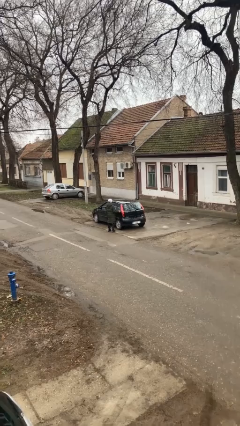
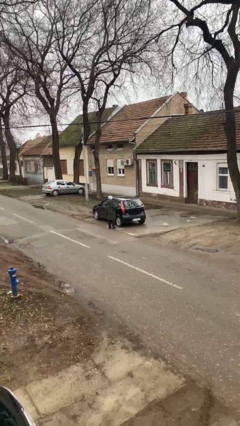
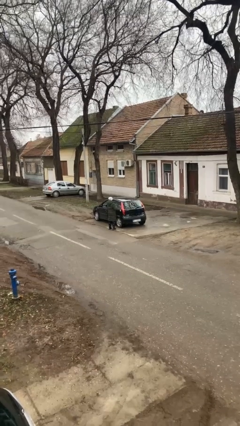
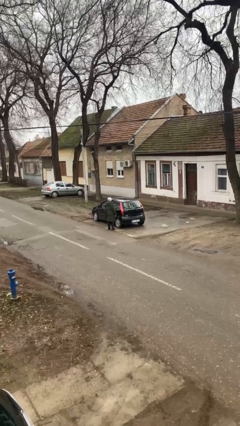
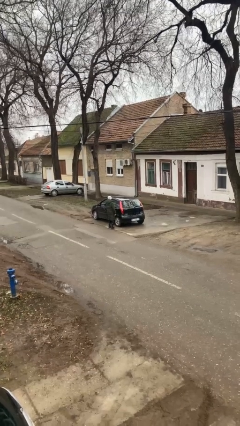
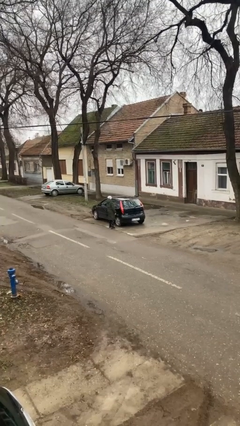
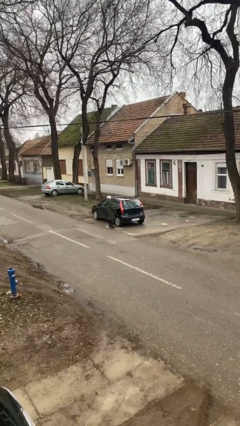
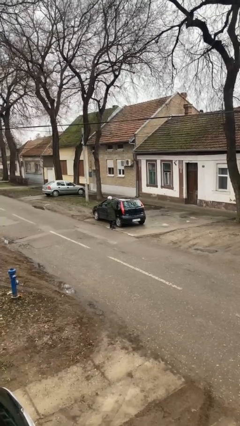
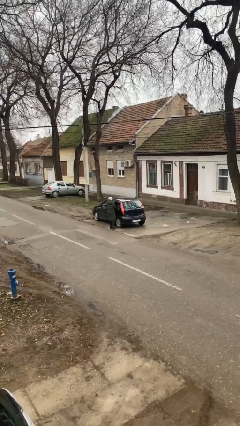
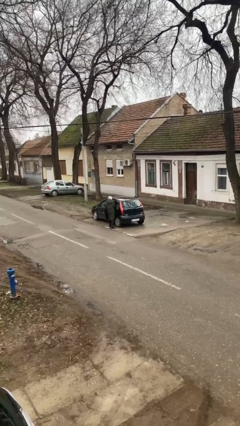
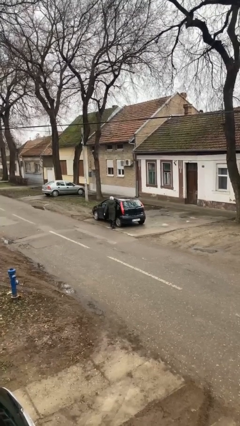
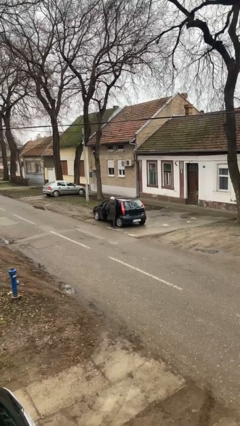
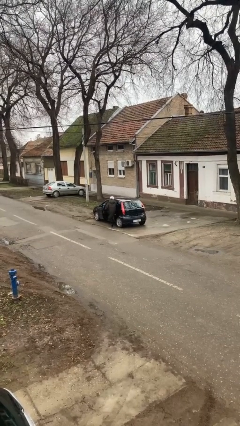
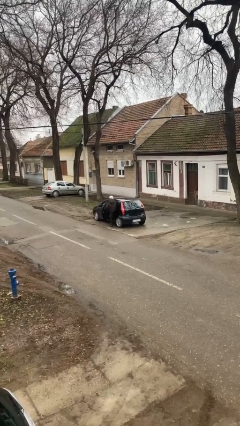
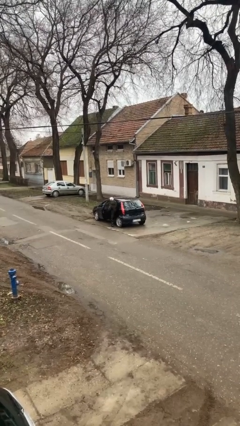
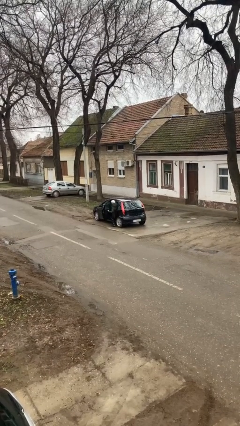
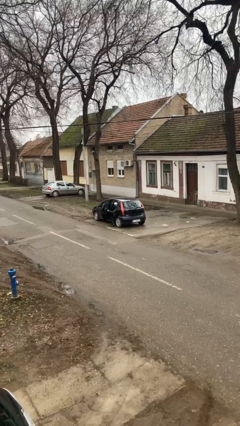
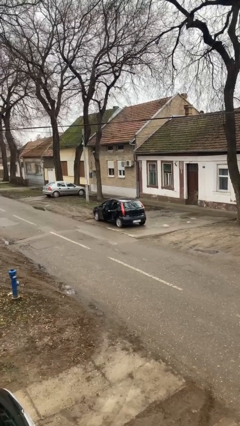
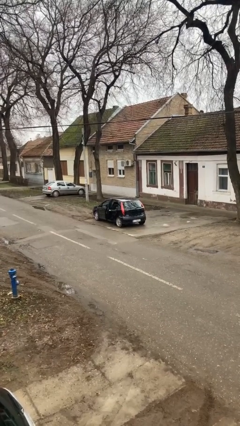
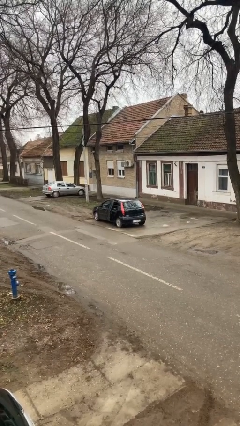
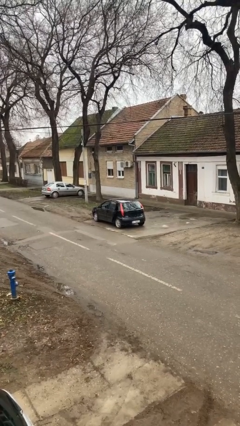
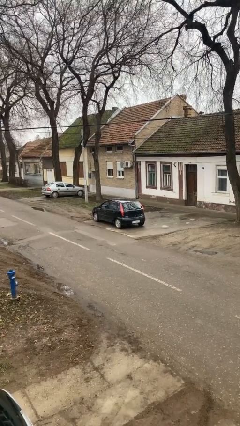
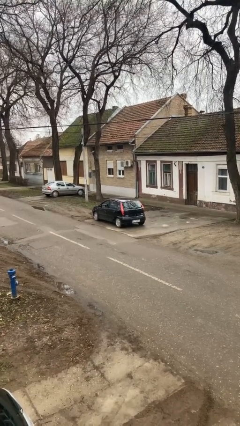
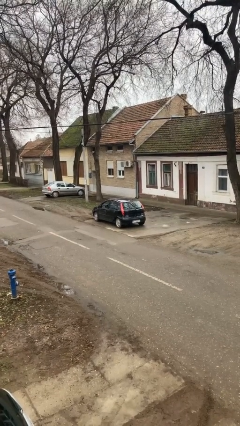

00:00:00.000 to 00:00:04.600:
car picks up person

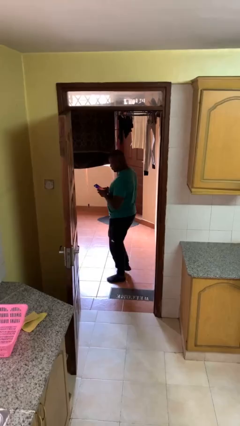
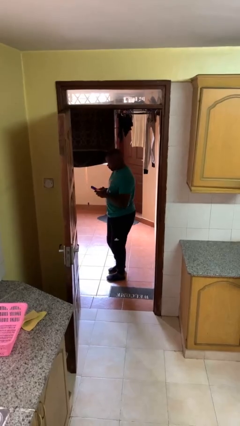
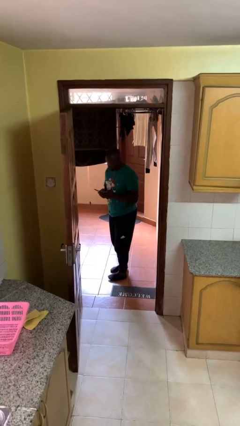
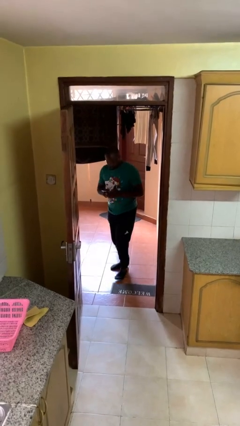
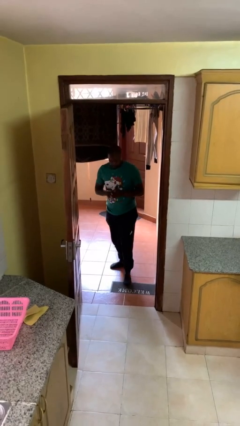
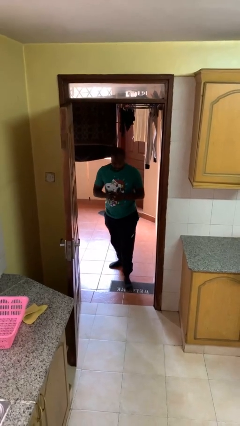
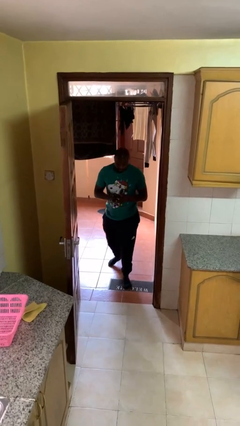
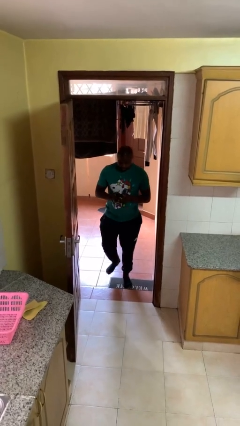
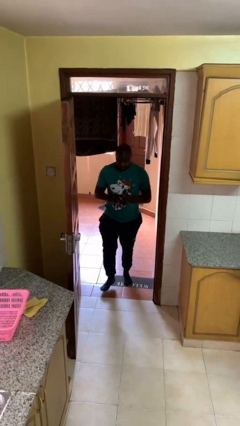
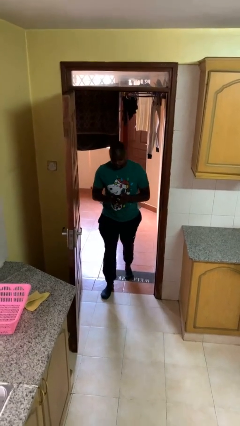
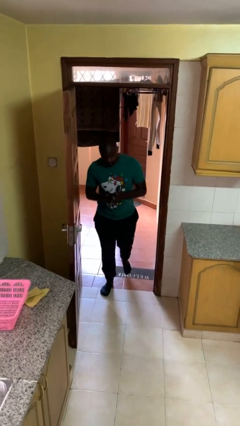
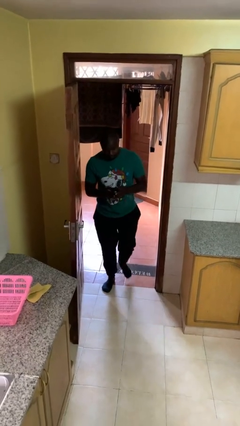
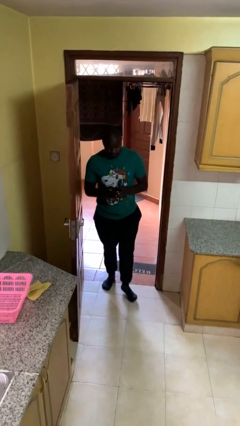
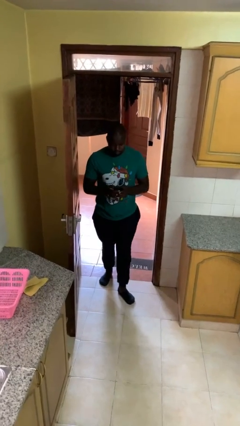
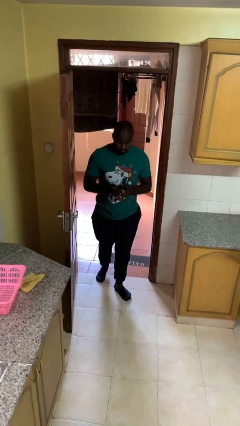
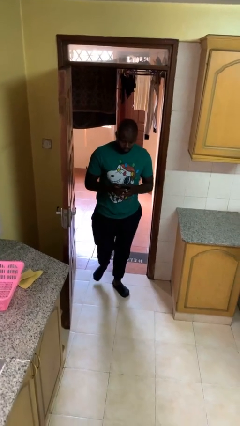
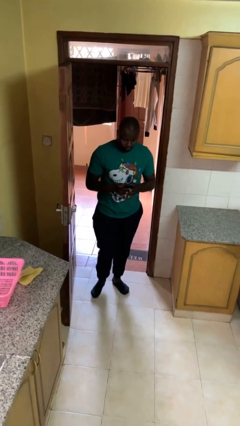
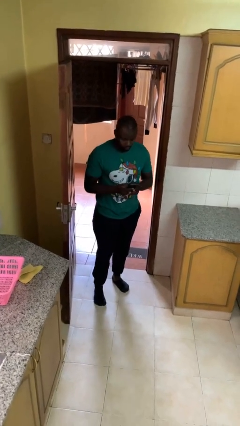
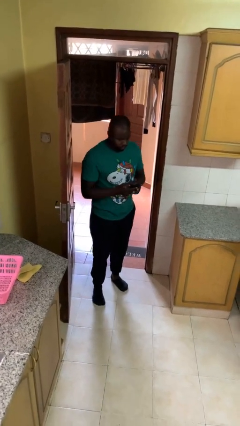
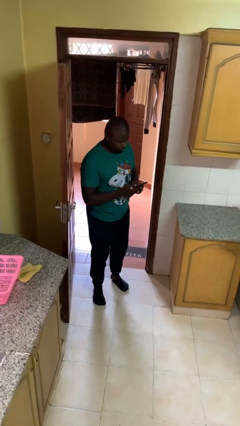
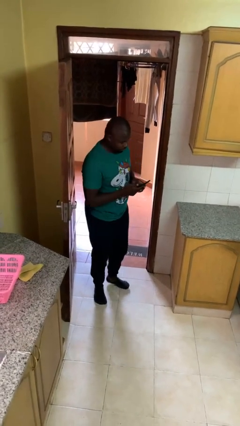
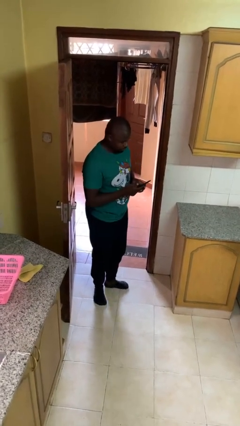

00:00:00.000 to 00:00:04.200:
person enters scene through structure

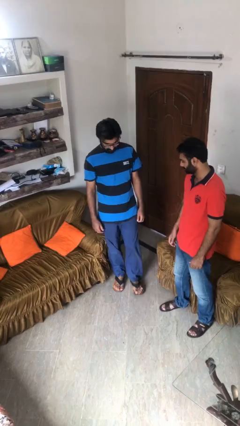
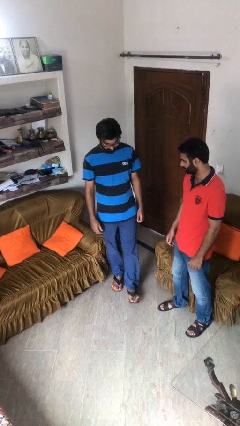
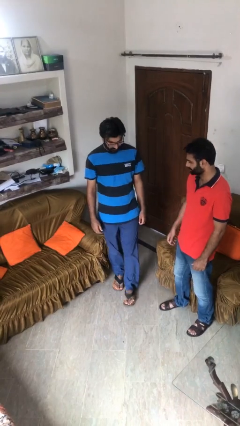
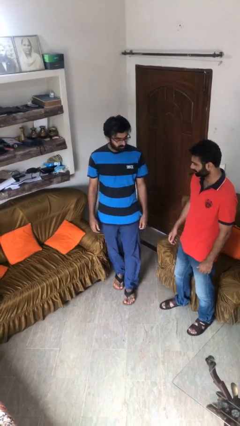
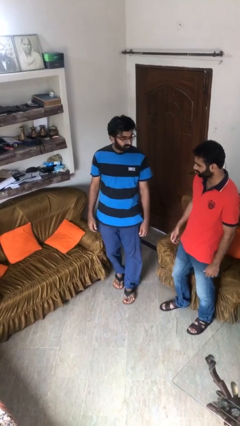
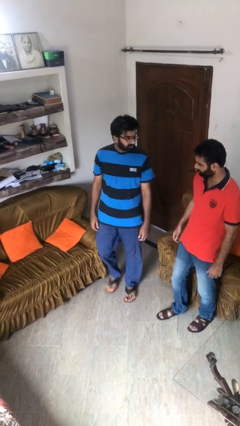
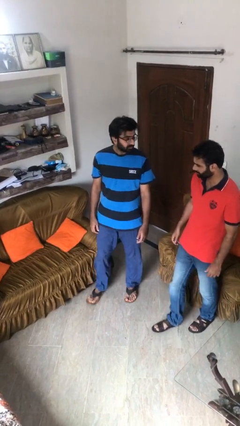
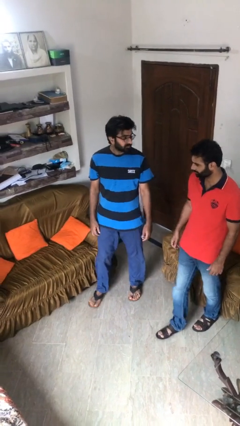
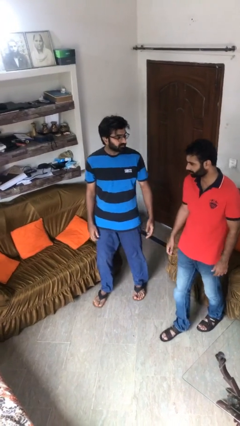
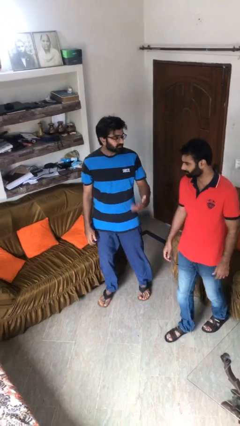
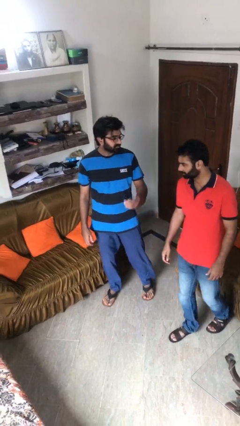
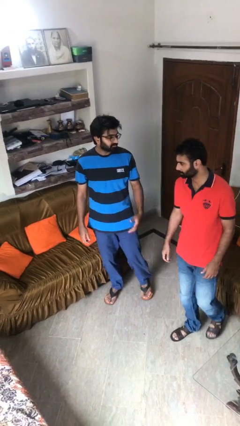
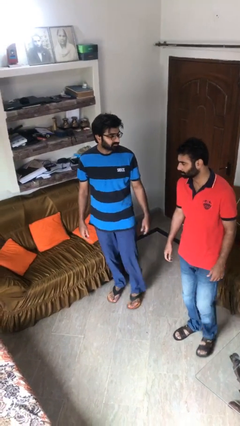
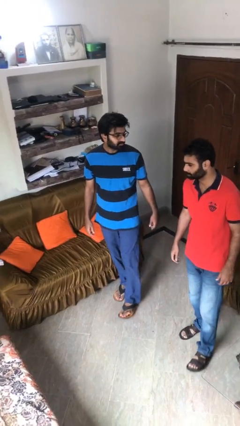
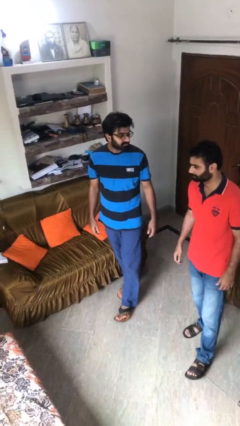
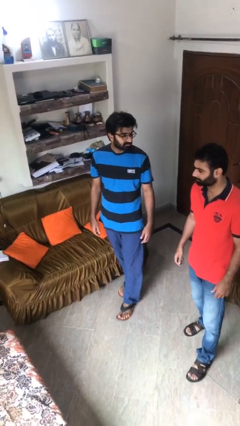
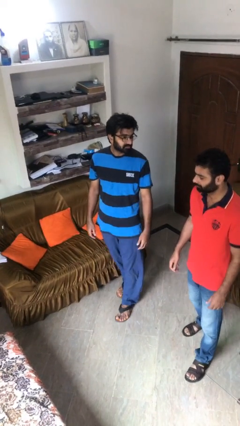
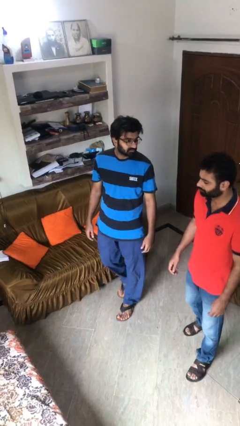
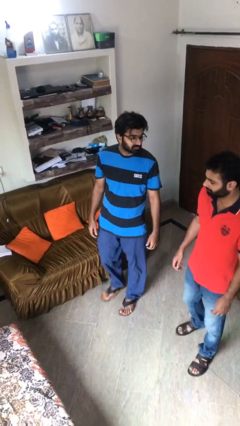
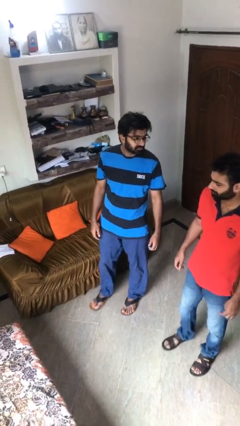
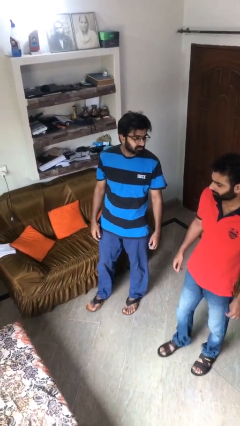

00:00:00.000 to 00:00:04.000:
person talks to person

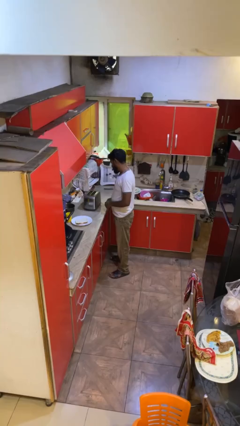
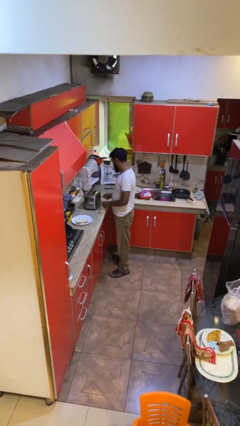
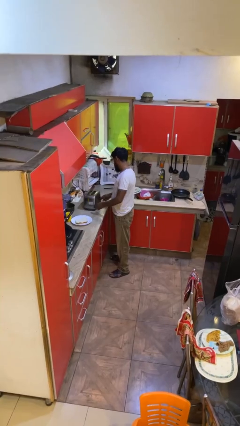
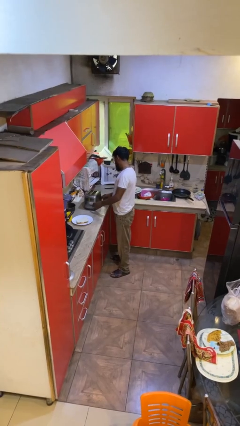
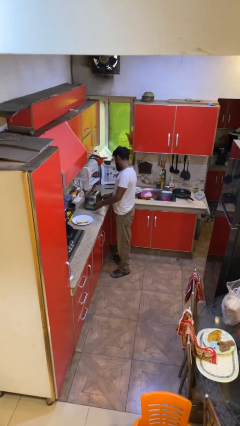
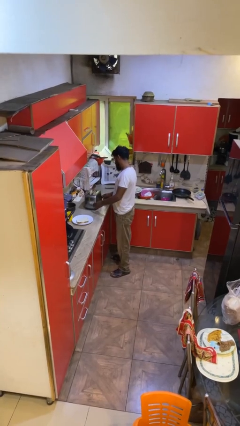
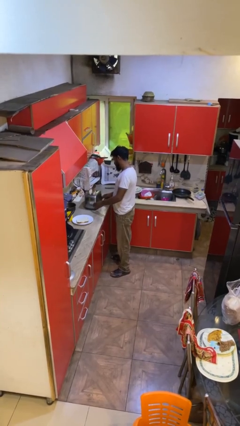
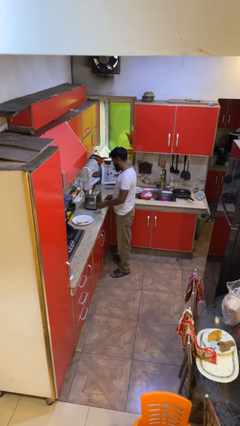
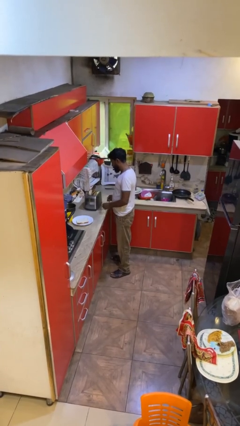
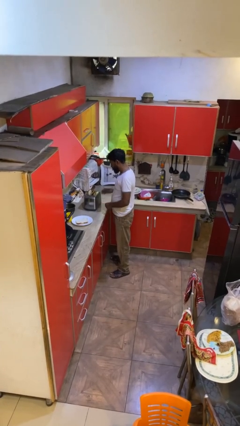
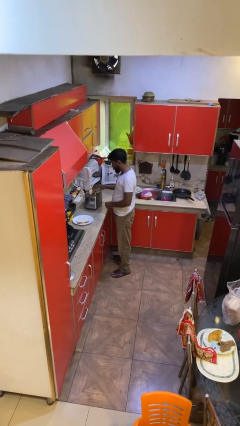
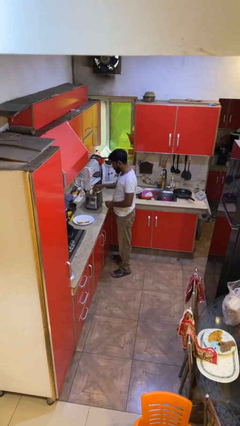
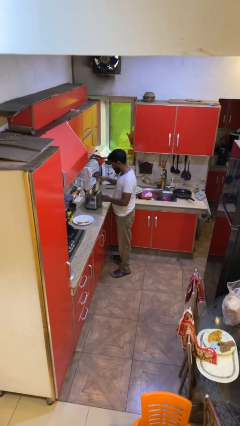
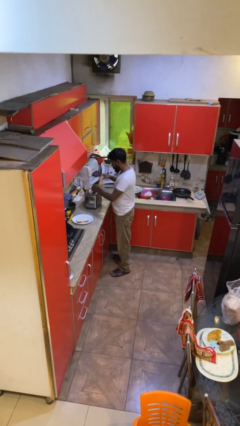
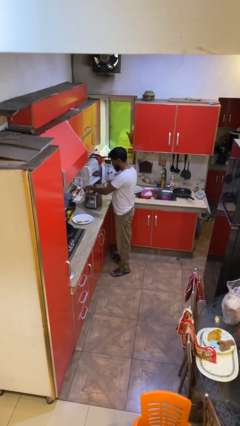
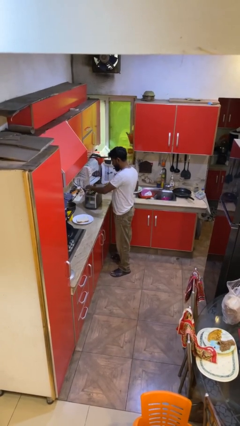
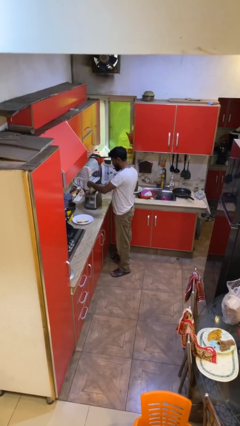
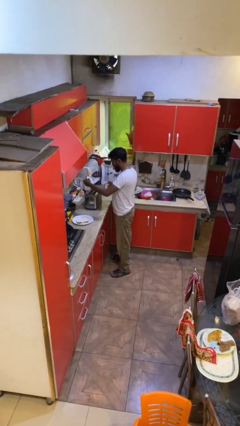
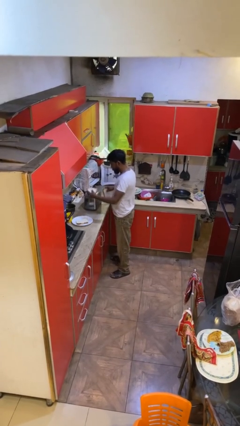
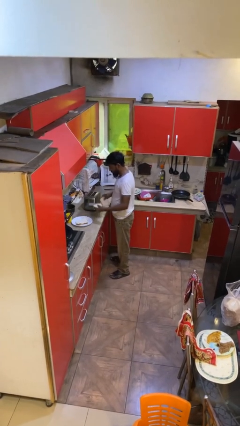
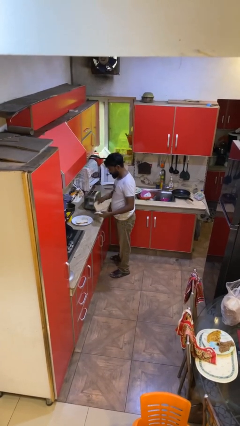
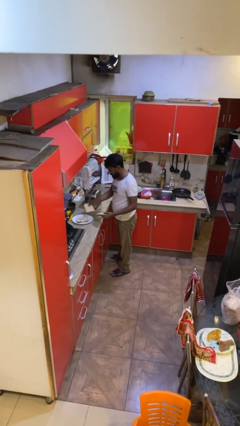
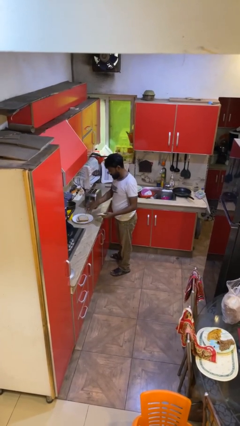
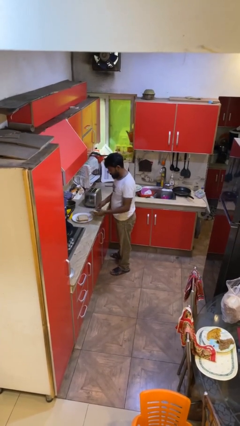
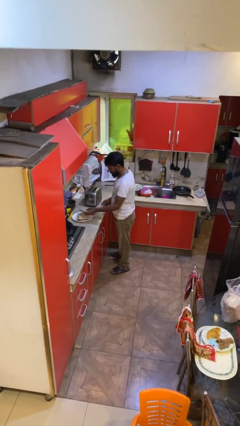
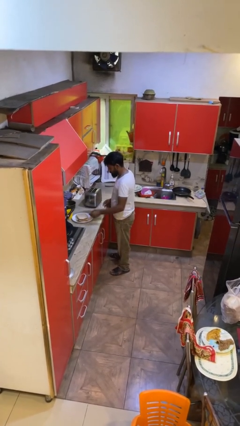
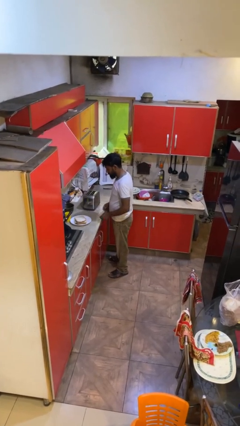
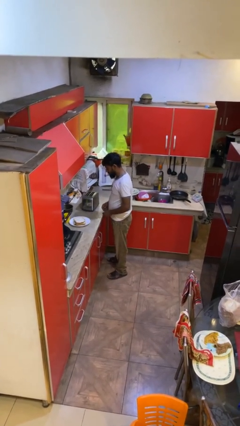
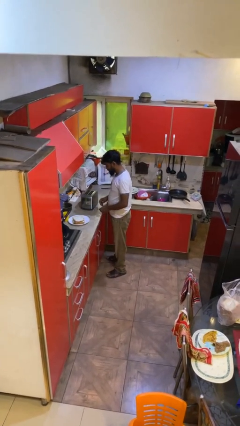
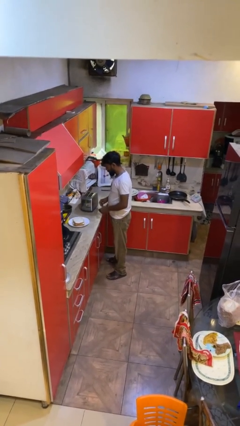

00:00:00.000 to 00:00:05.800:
person takes object from toaster
